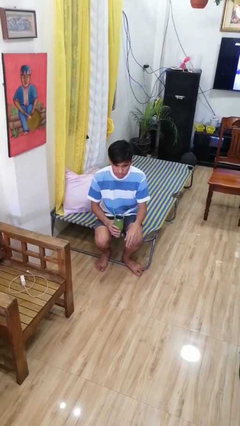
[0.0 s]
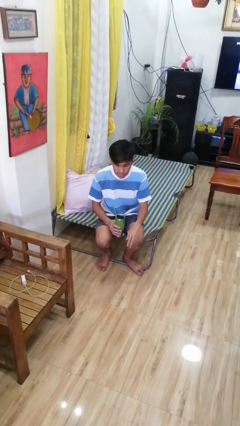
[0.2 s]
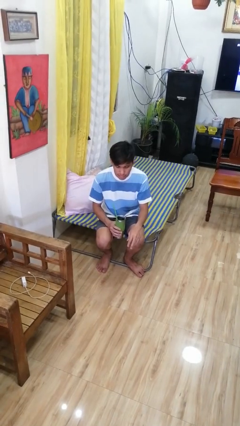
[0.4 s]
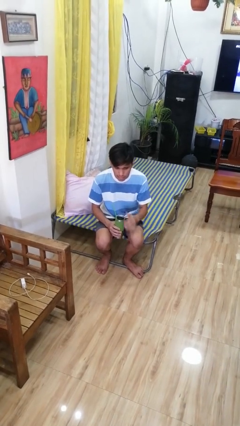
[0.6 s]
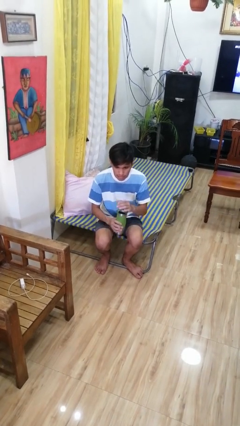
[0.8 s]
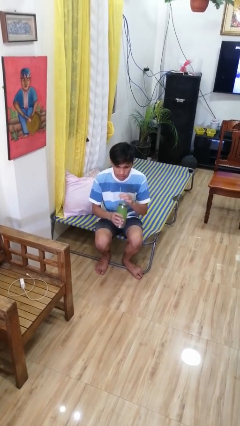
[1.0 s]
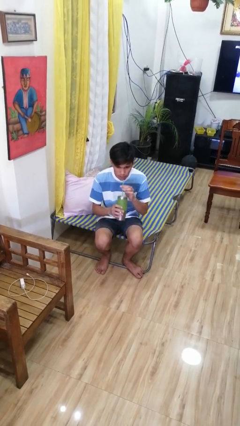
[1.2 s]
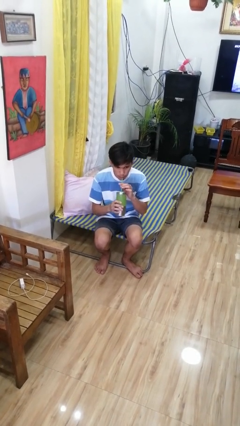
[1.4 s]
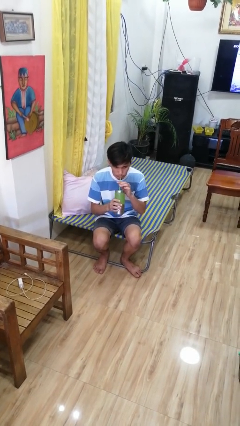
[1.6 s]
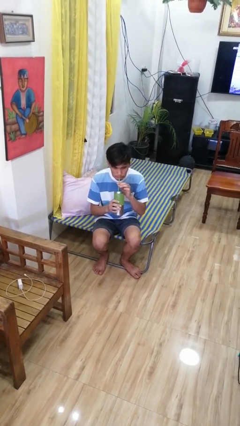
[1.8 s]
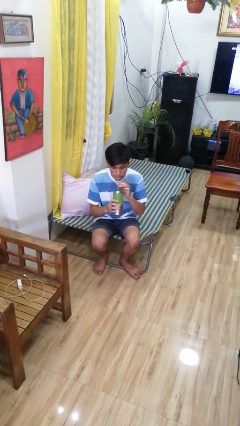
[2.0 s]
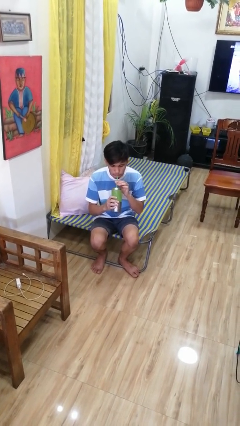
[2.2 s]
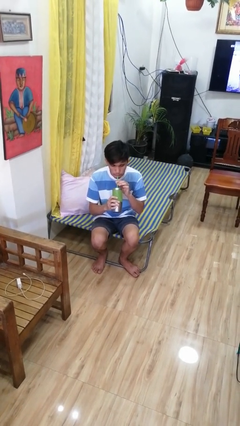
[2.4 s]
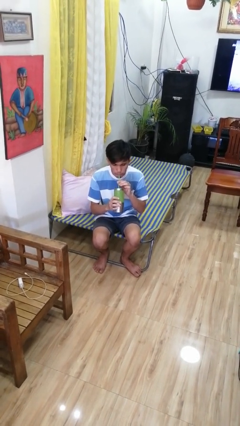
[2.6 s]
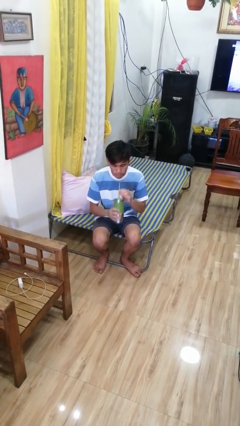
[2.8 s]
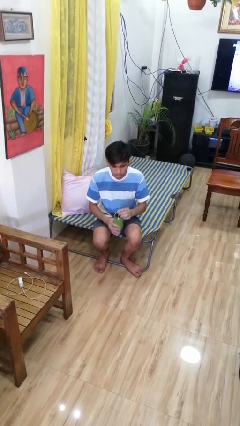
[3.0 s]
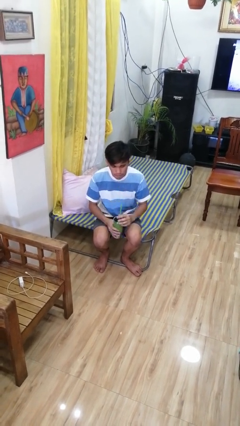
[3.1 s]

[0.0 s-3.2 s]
person drinks from straw

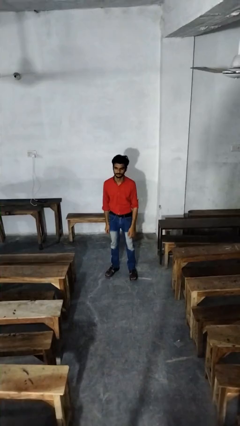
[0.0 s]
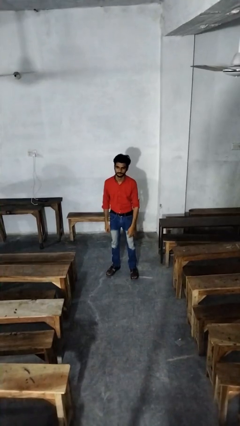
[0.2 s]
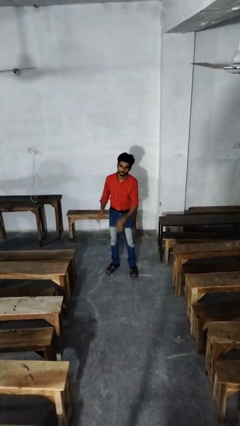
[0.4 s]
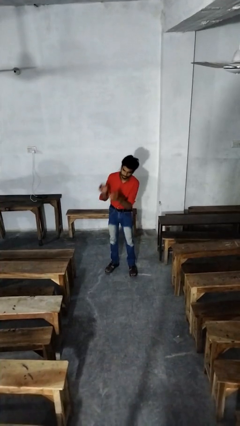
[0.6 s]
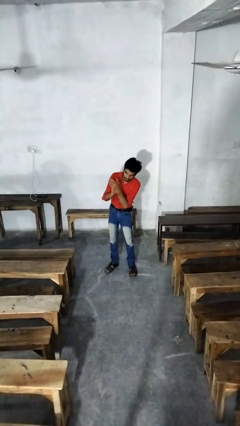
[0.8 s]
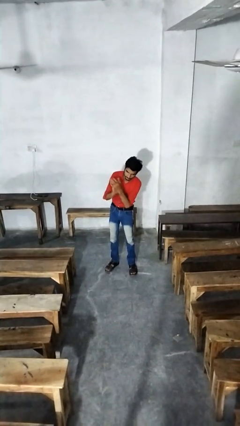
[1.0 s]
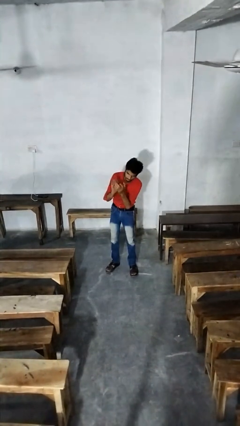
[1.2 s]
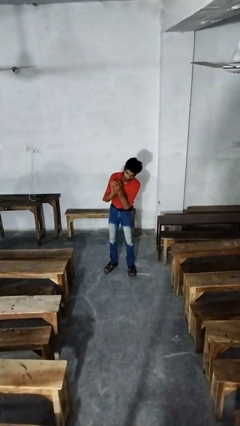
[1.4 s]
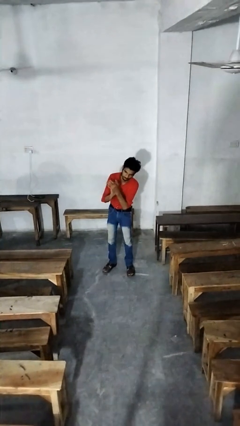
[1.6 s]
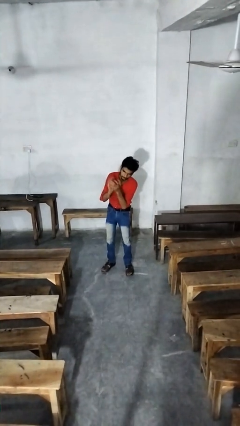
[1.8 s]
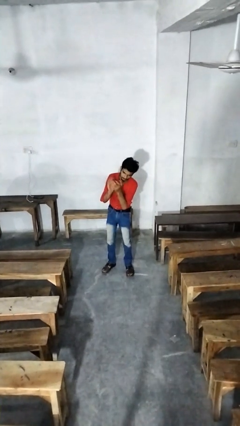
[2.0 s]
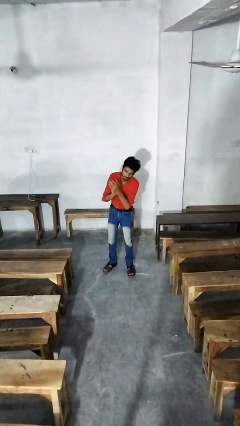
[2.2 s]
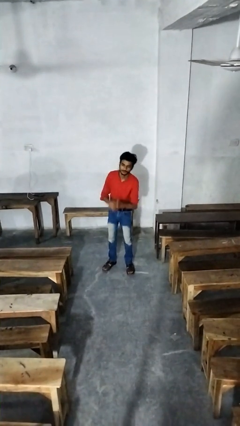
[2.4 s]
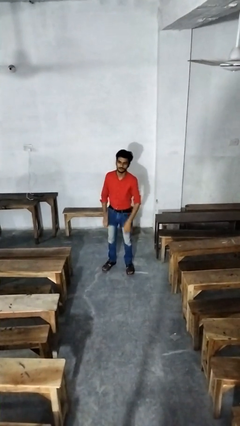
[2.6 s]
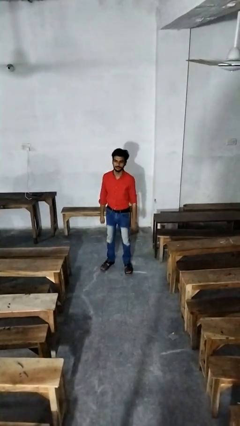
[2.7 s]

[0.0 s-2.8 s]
person claps hands

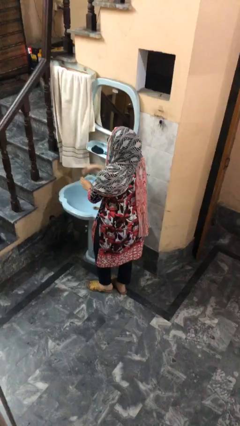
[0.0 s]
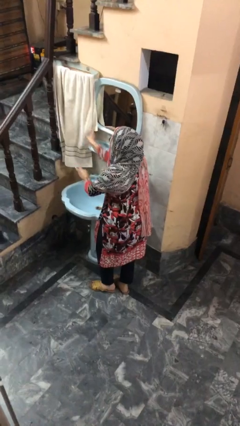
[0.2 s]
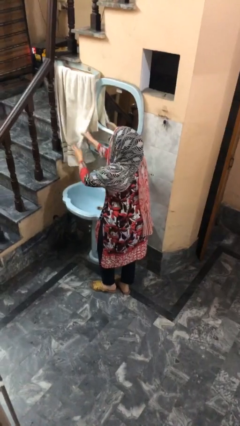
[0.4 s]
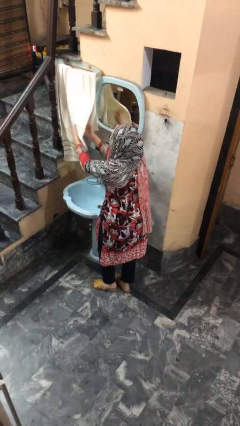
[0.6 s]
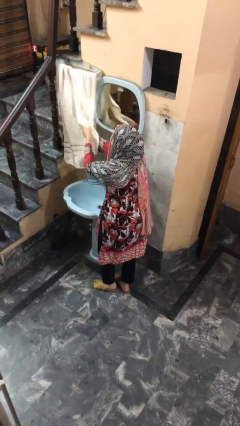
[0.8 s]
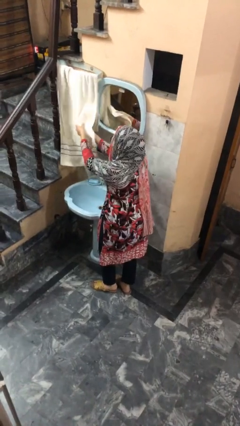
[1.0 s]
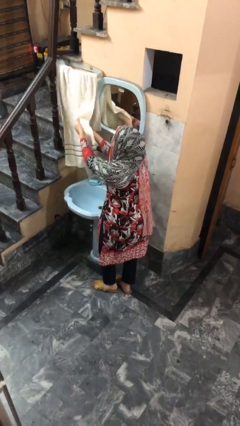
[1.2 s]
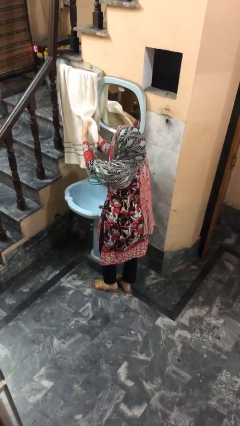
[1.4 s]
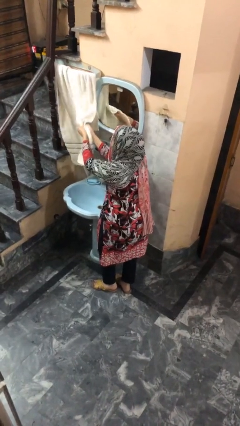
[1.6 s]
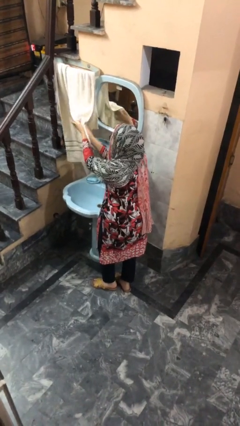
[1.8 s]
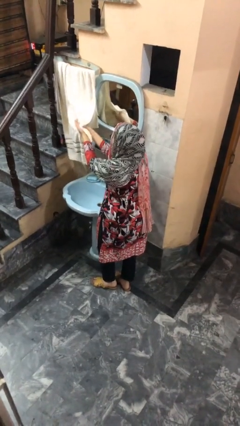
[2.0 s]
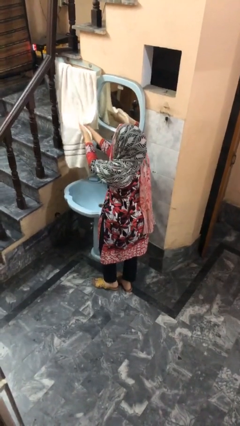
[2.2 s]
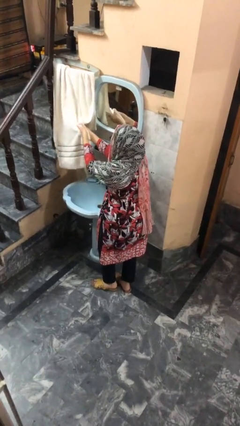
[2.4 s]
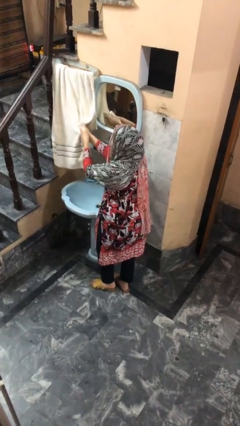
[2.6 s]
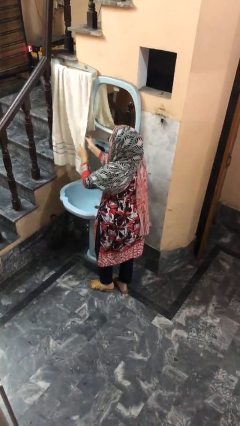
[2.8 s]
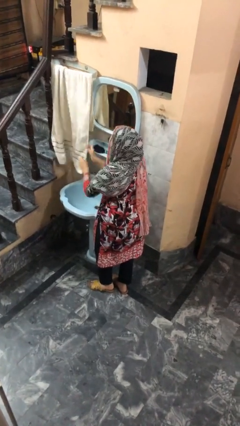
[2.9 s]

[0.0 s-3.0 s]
person dries face with towel

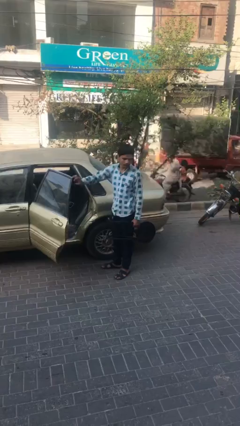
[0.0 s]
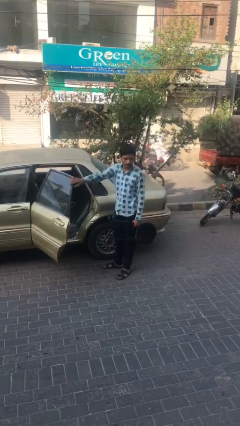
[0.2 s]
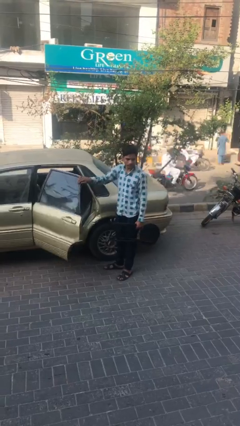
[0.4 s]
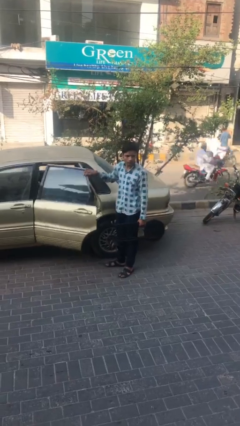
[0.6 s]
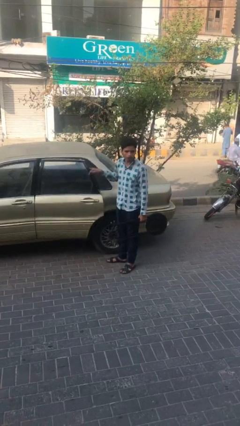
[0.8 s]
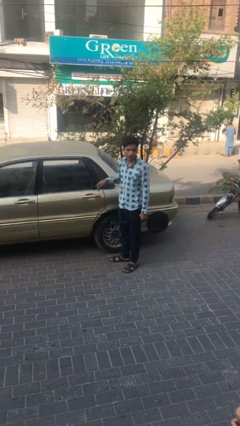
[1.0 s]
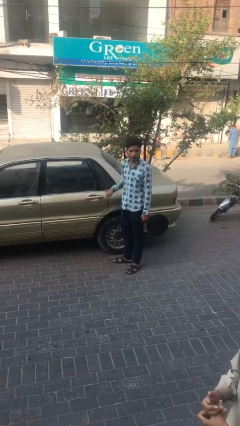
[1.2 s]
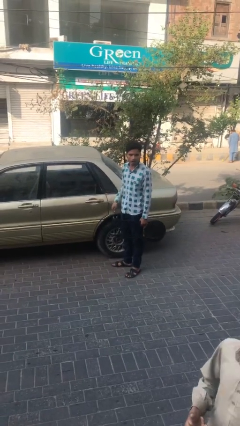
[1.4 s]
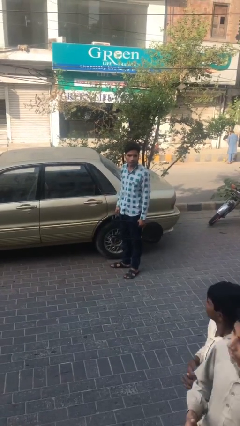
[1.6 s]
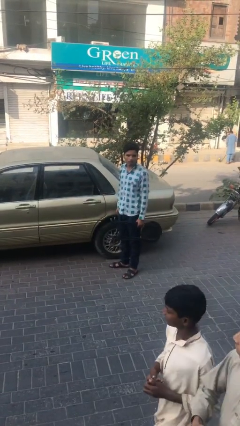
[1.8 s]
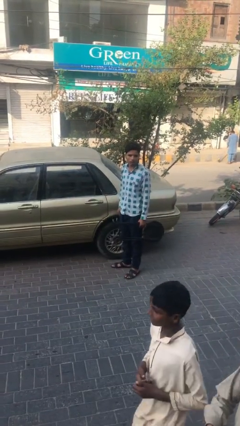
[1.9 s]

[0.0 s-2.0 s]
person closes car door

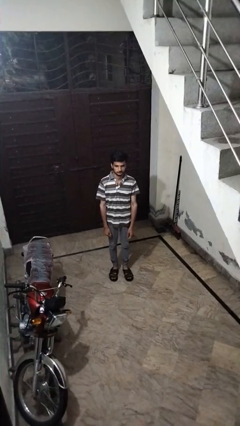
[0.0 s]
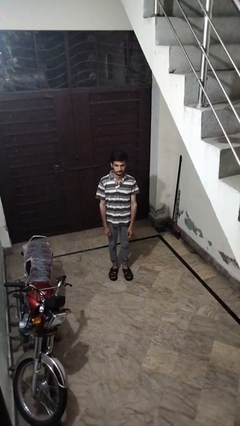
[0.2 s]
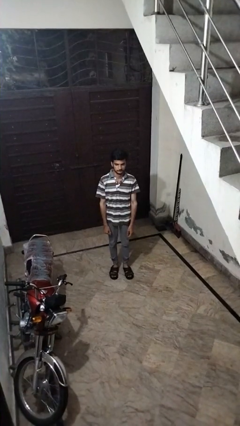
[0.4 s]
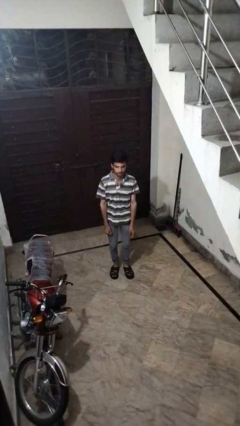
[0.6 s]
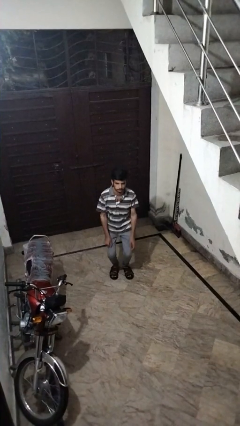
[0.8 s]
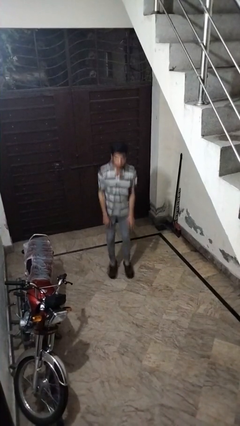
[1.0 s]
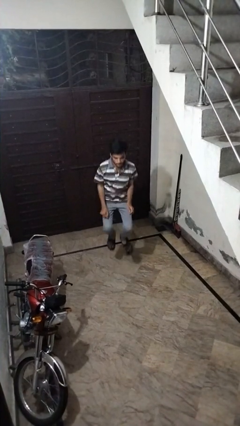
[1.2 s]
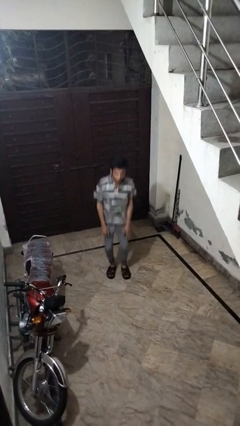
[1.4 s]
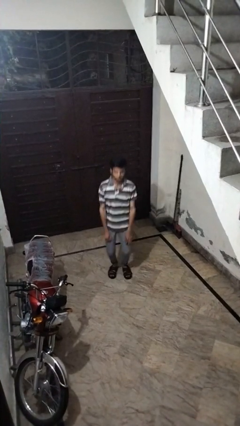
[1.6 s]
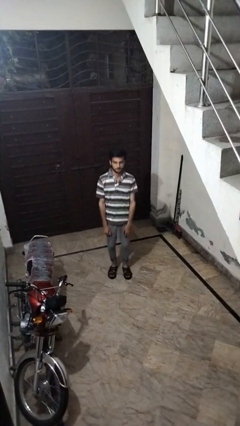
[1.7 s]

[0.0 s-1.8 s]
person jumps

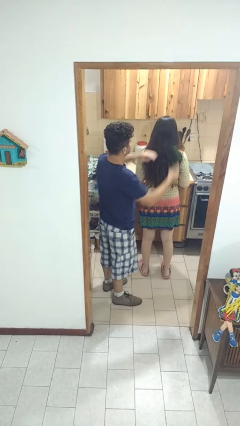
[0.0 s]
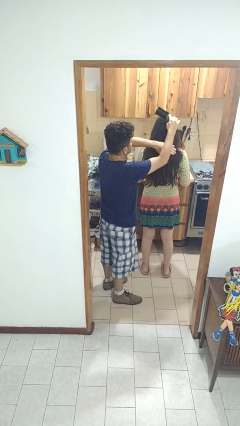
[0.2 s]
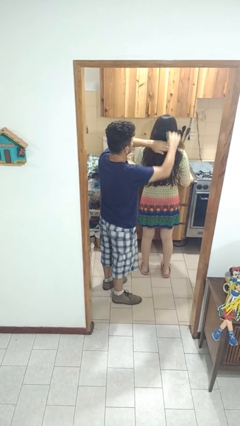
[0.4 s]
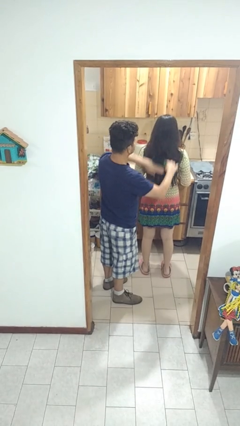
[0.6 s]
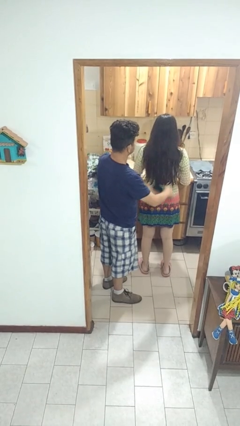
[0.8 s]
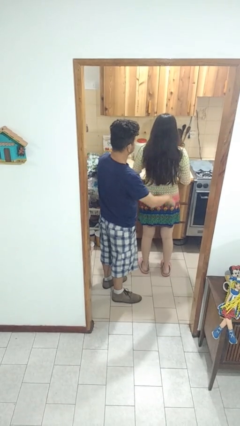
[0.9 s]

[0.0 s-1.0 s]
person brushes hair of person

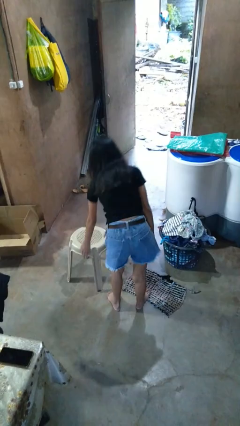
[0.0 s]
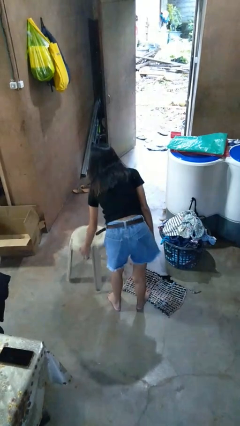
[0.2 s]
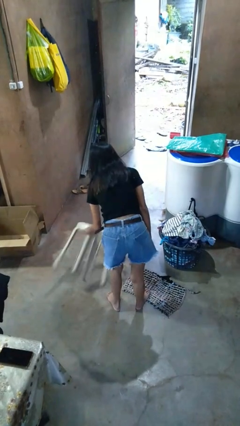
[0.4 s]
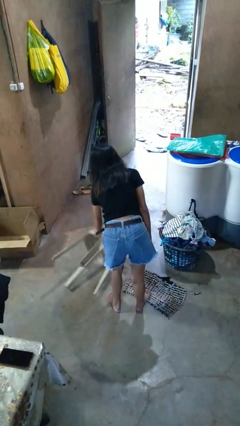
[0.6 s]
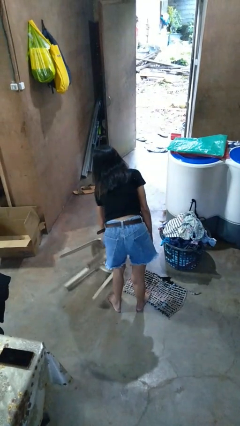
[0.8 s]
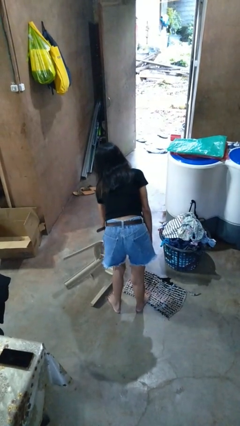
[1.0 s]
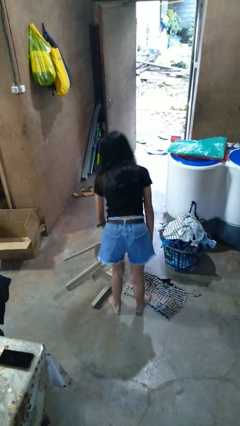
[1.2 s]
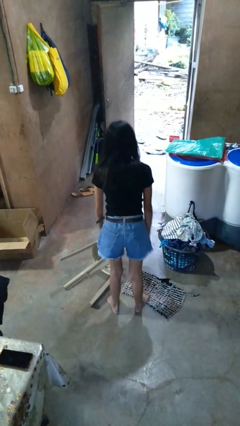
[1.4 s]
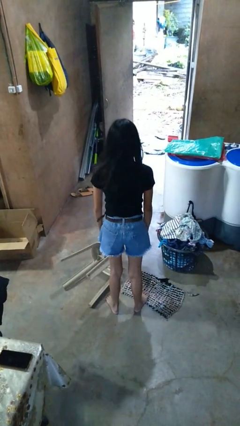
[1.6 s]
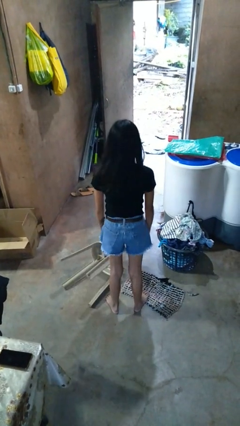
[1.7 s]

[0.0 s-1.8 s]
person knocks over furniture

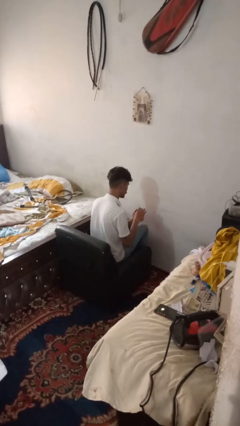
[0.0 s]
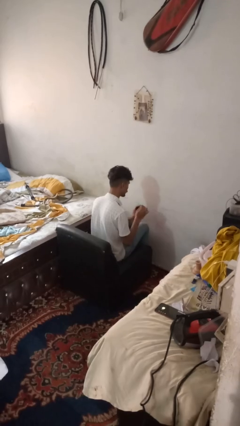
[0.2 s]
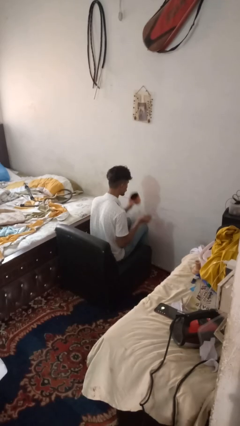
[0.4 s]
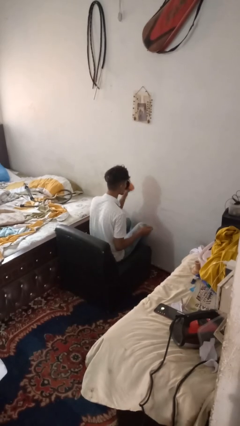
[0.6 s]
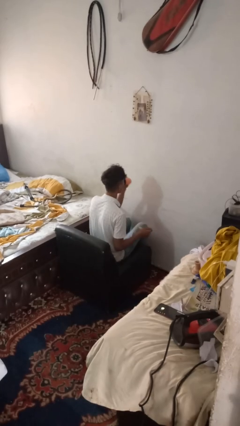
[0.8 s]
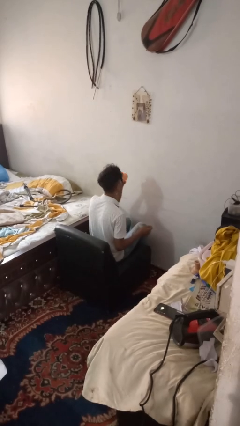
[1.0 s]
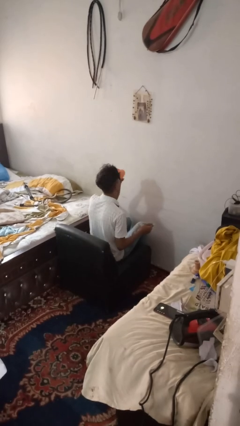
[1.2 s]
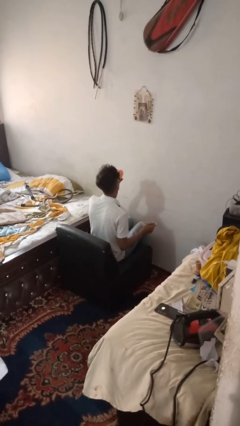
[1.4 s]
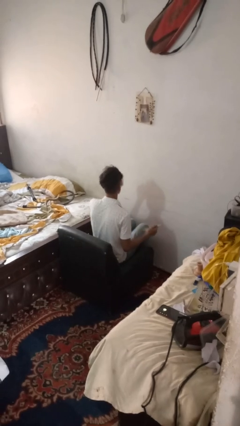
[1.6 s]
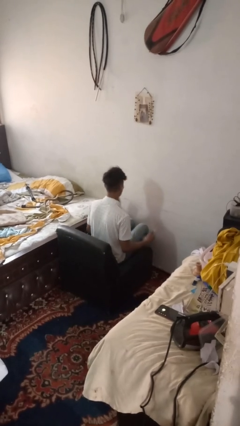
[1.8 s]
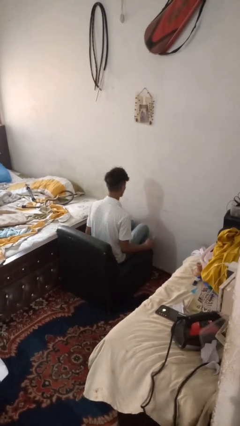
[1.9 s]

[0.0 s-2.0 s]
person drinks from mug
